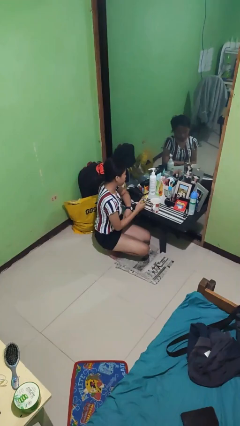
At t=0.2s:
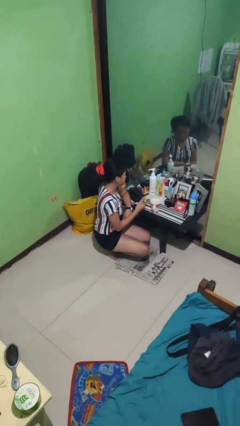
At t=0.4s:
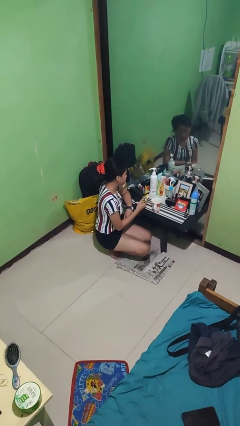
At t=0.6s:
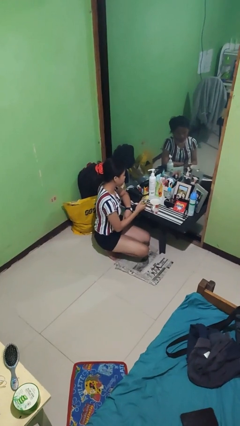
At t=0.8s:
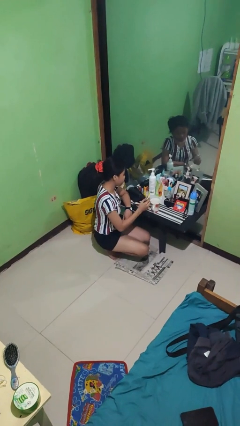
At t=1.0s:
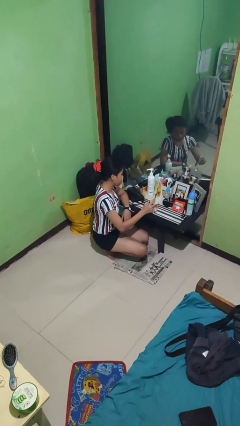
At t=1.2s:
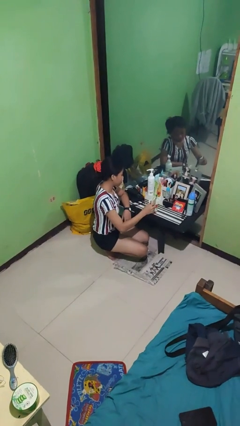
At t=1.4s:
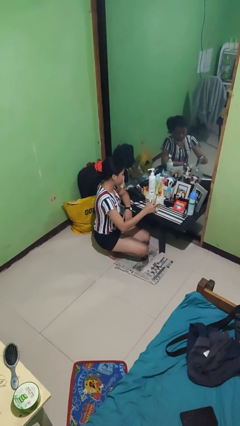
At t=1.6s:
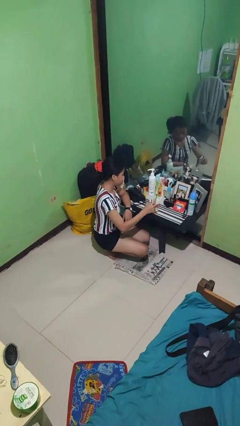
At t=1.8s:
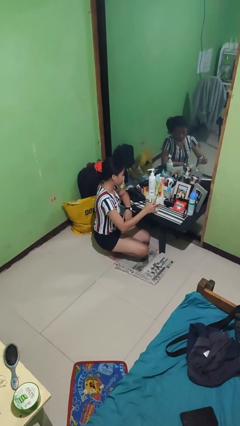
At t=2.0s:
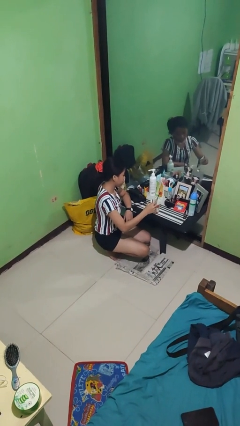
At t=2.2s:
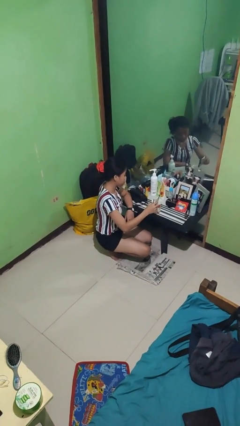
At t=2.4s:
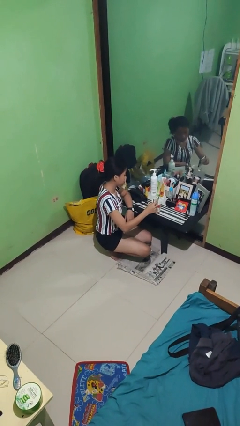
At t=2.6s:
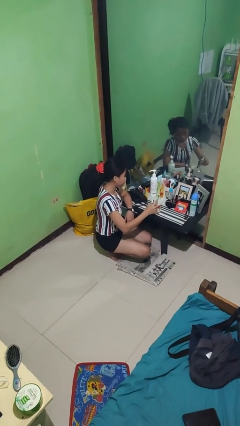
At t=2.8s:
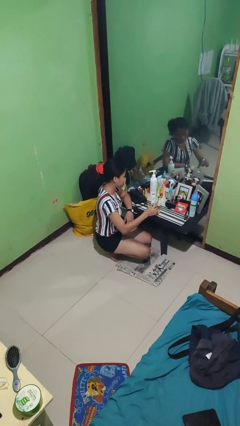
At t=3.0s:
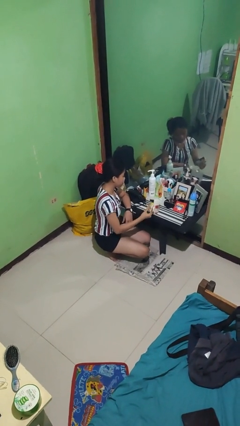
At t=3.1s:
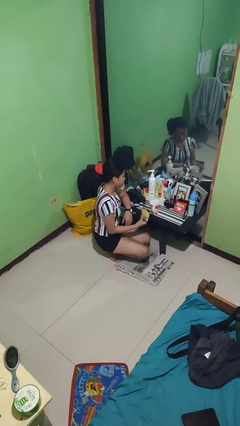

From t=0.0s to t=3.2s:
person pours coffee into mug

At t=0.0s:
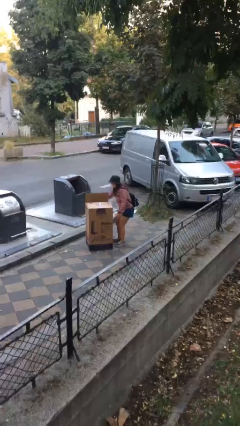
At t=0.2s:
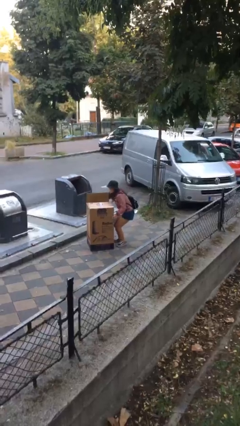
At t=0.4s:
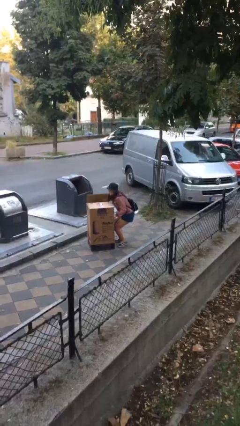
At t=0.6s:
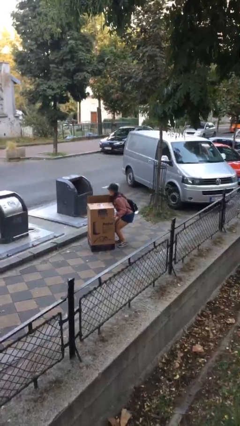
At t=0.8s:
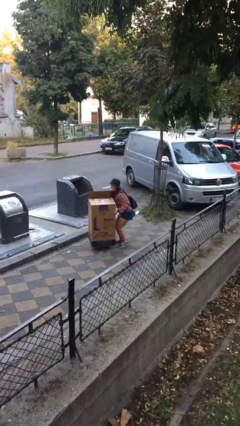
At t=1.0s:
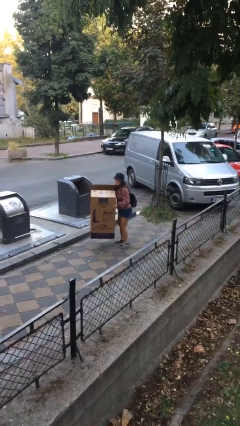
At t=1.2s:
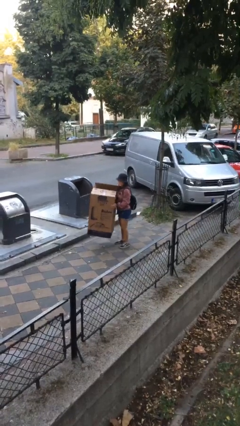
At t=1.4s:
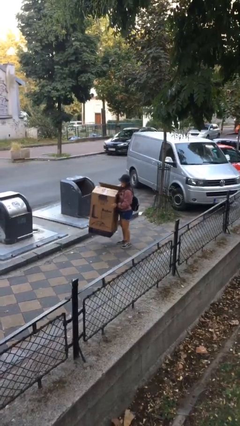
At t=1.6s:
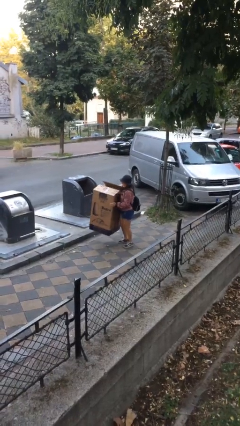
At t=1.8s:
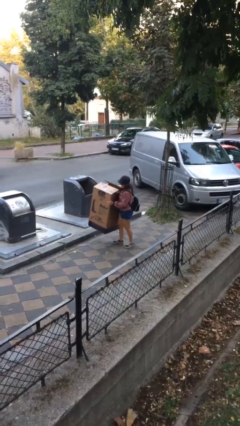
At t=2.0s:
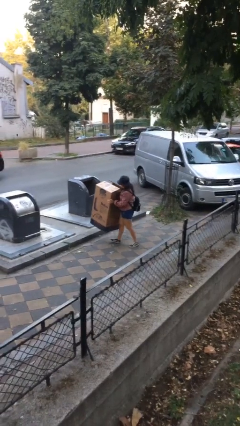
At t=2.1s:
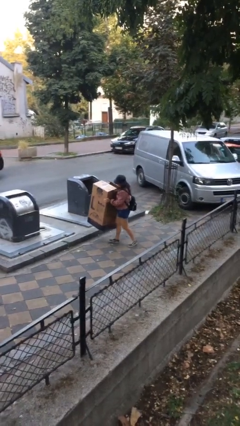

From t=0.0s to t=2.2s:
person picks up object from floor

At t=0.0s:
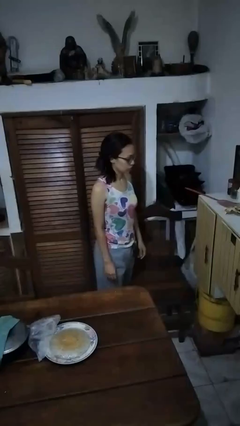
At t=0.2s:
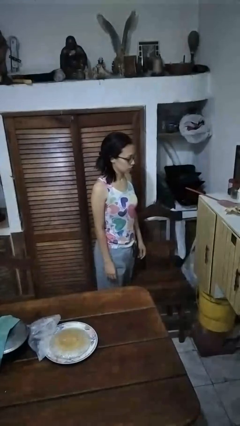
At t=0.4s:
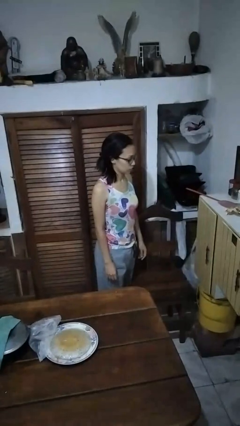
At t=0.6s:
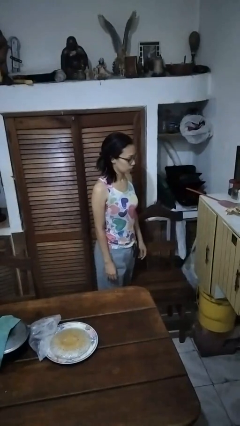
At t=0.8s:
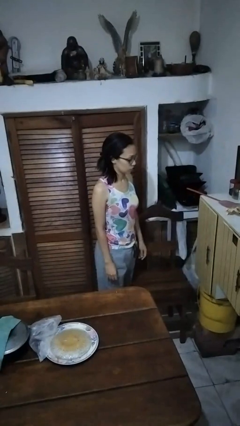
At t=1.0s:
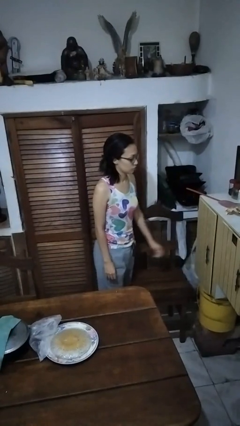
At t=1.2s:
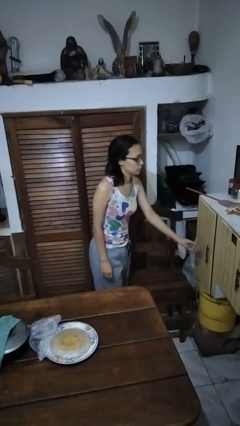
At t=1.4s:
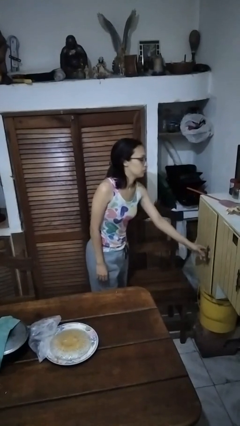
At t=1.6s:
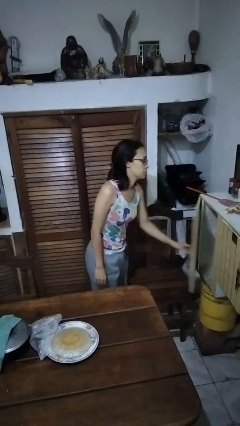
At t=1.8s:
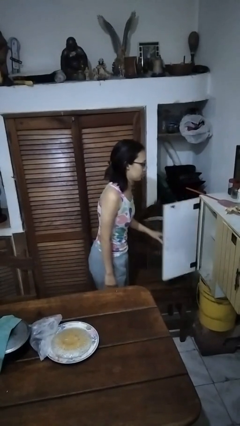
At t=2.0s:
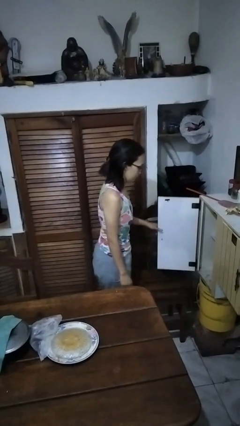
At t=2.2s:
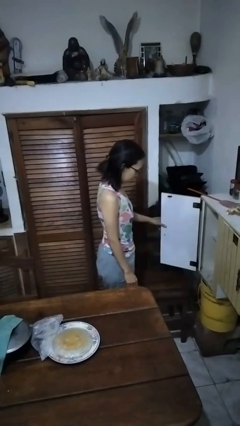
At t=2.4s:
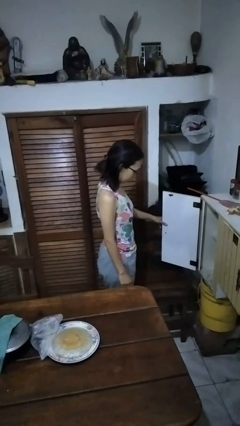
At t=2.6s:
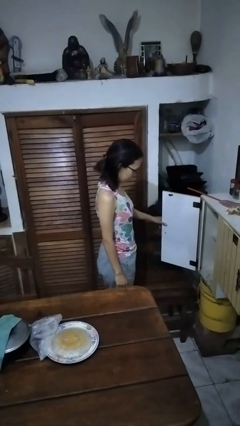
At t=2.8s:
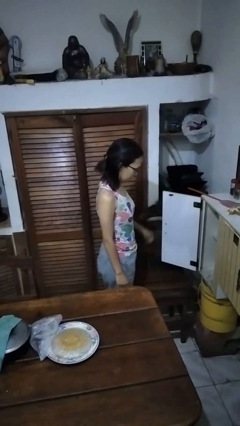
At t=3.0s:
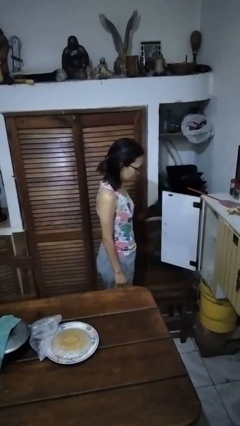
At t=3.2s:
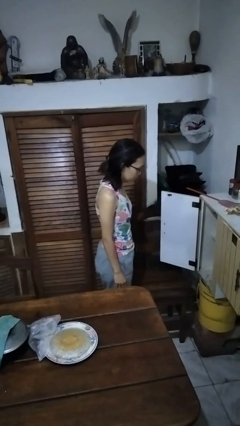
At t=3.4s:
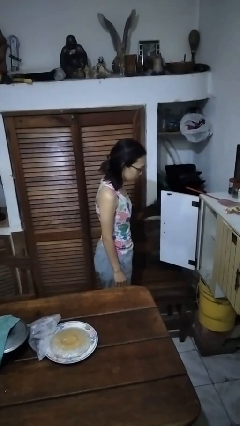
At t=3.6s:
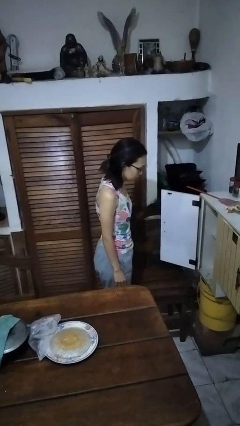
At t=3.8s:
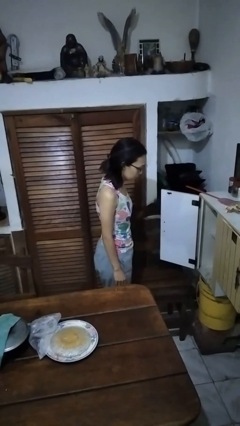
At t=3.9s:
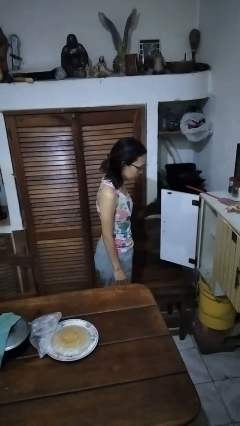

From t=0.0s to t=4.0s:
person opens cabinet

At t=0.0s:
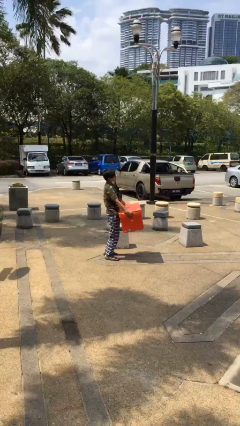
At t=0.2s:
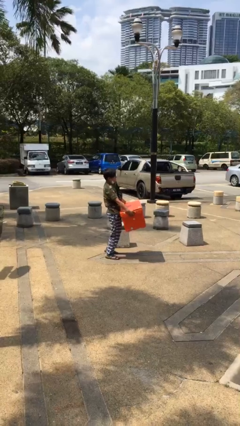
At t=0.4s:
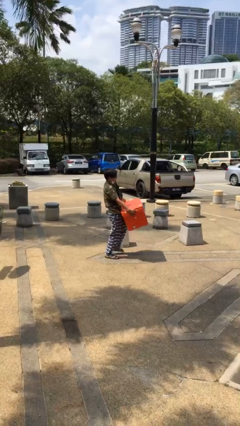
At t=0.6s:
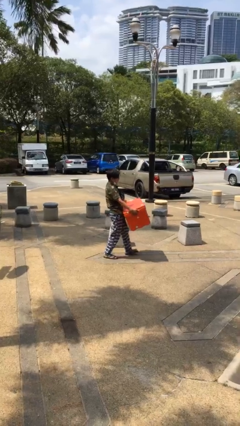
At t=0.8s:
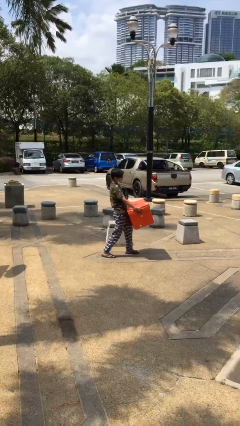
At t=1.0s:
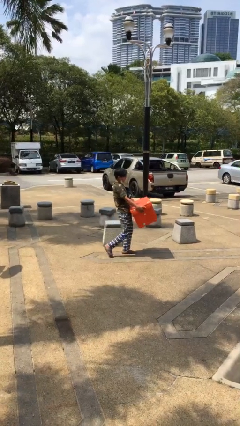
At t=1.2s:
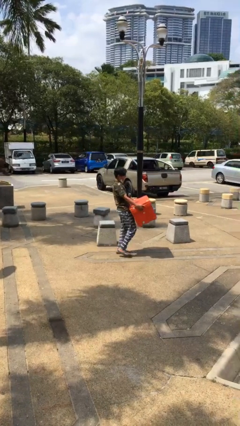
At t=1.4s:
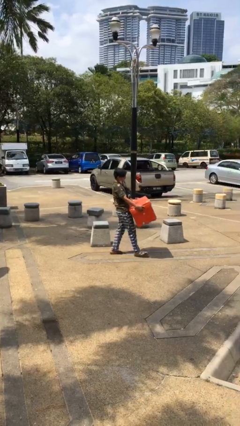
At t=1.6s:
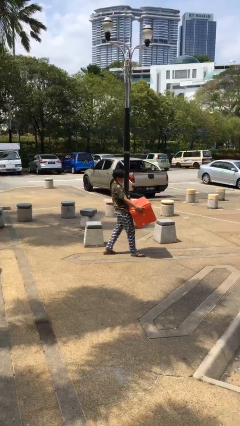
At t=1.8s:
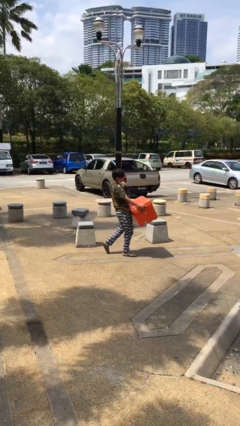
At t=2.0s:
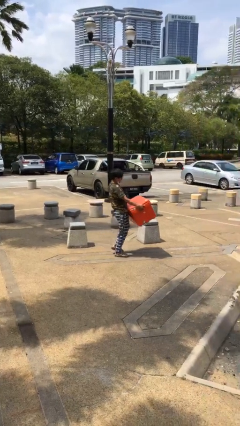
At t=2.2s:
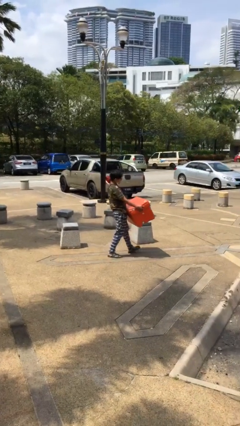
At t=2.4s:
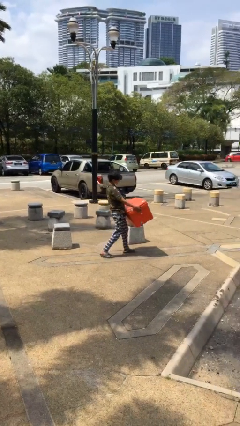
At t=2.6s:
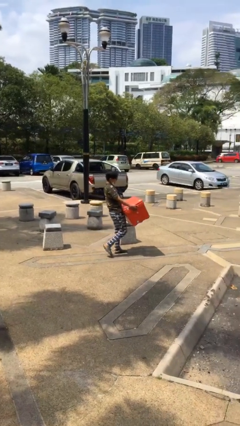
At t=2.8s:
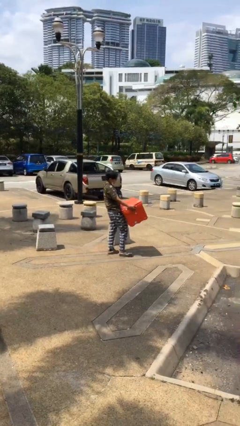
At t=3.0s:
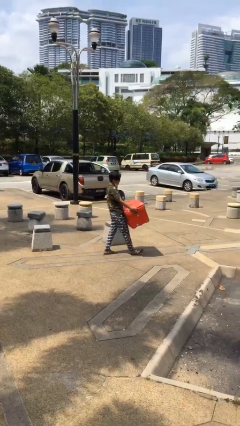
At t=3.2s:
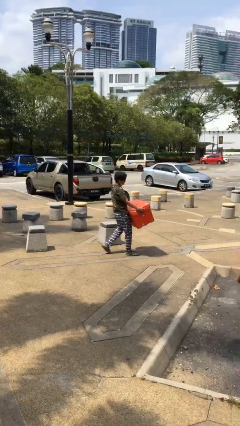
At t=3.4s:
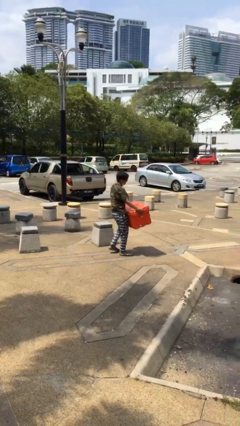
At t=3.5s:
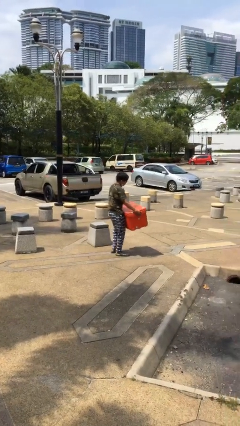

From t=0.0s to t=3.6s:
person carries heavy object

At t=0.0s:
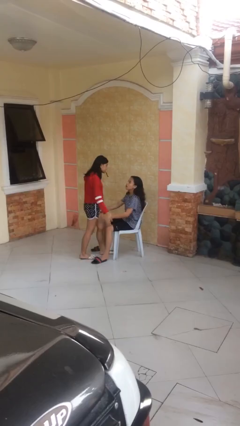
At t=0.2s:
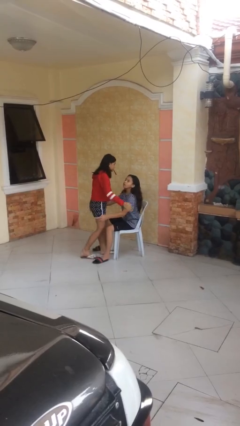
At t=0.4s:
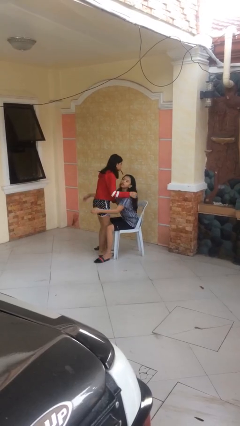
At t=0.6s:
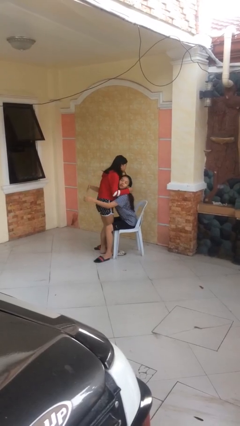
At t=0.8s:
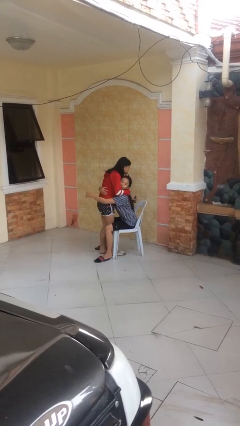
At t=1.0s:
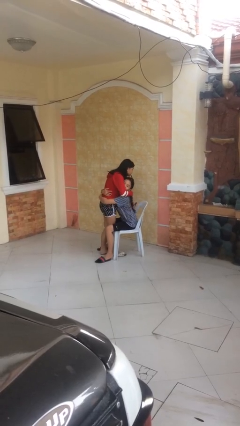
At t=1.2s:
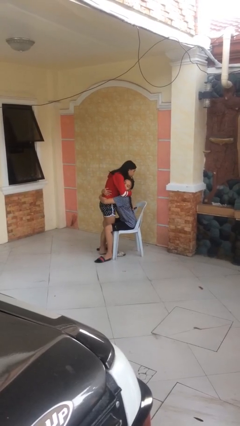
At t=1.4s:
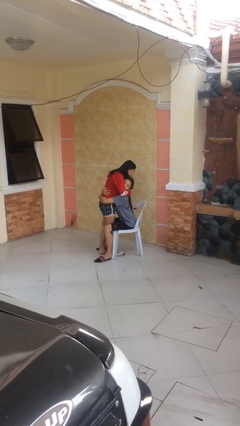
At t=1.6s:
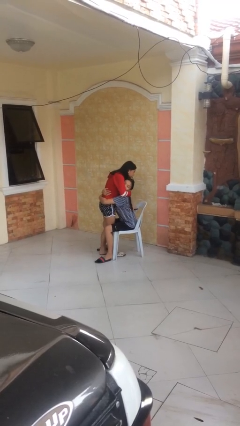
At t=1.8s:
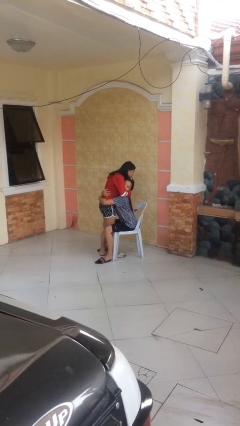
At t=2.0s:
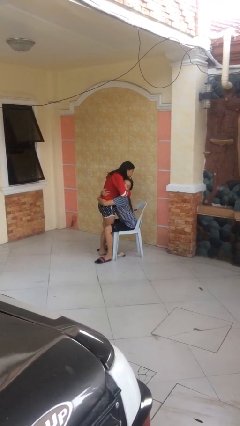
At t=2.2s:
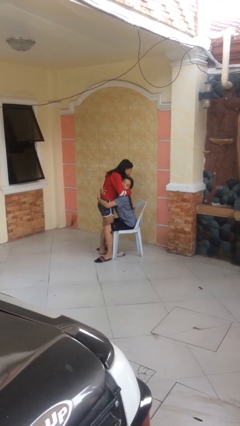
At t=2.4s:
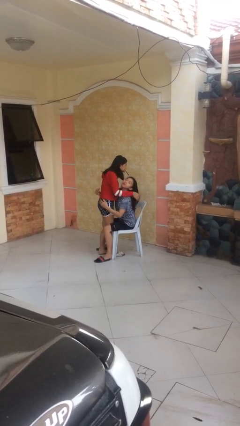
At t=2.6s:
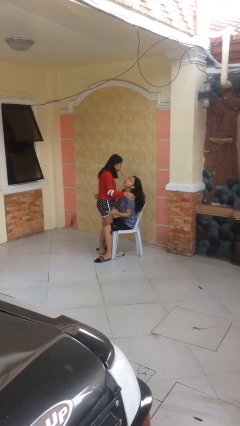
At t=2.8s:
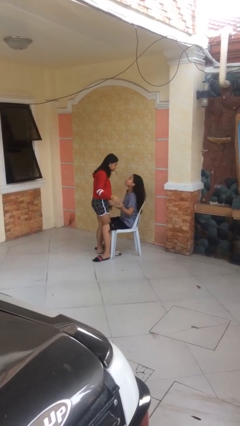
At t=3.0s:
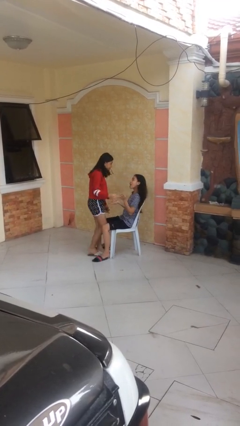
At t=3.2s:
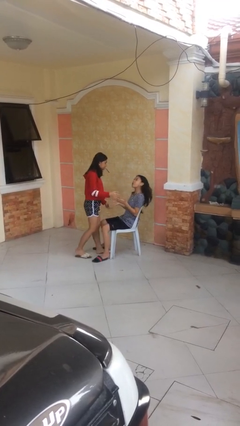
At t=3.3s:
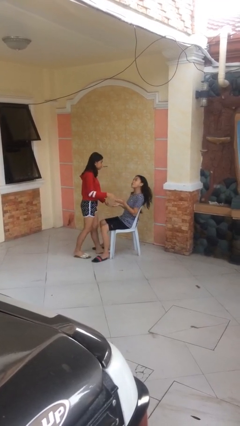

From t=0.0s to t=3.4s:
person embraces person

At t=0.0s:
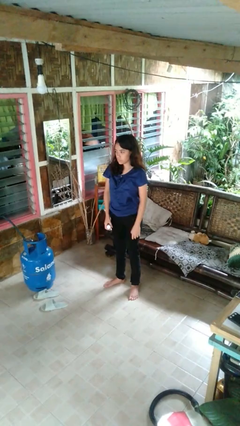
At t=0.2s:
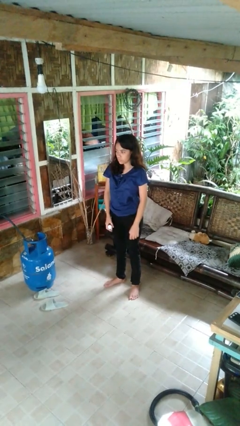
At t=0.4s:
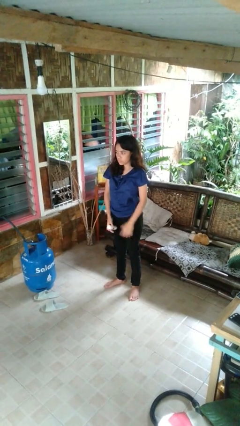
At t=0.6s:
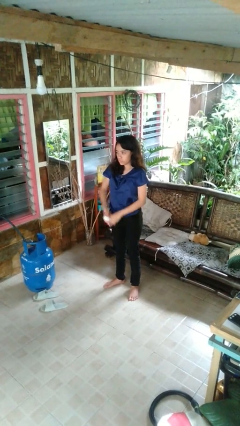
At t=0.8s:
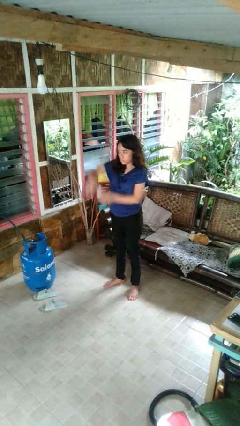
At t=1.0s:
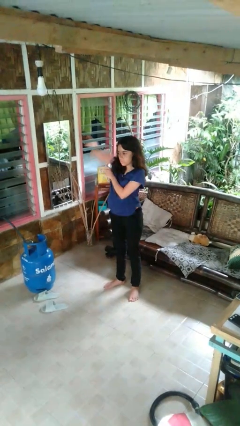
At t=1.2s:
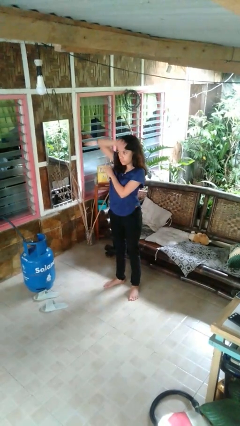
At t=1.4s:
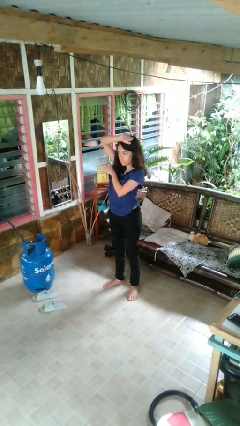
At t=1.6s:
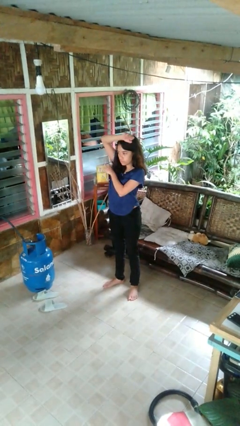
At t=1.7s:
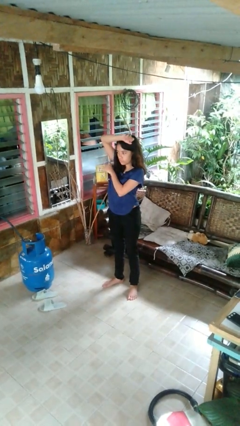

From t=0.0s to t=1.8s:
person applies deodorant
